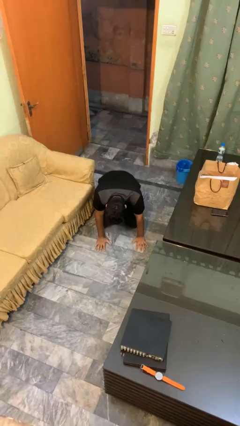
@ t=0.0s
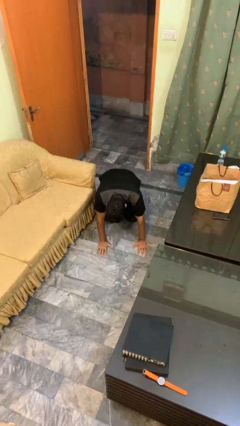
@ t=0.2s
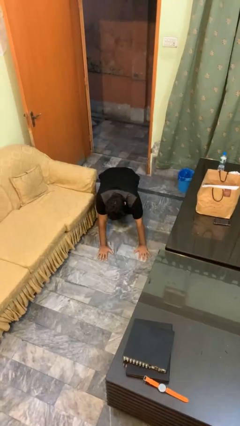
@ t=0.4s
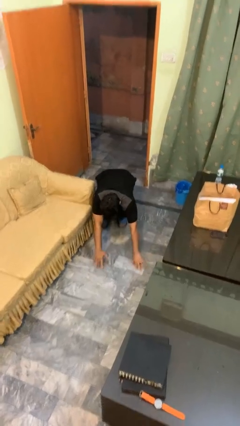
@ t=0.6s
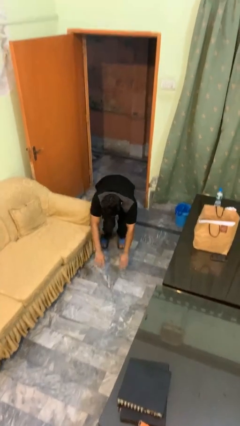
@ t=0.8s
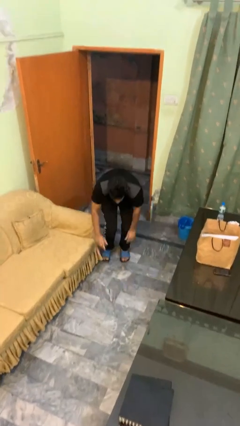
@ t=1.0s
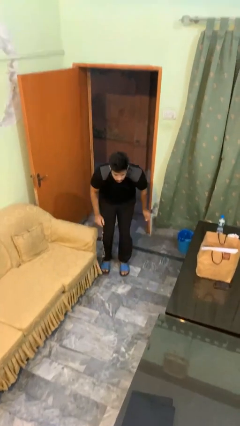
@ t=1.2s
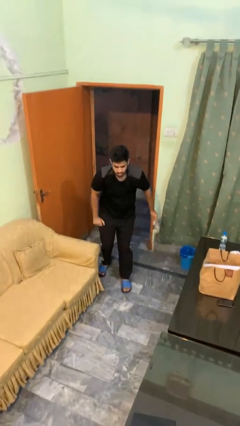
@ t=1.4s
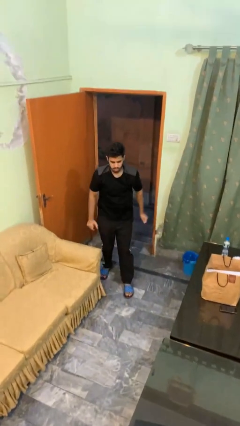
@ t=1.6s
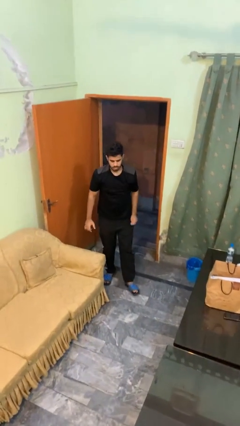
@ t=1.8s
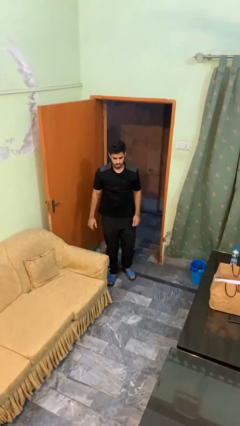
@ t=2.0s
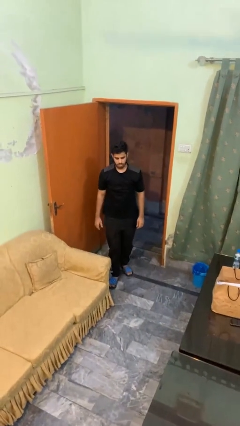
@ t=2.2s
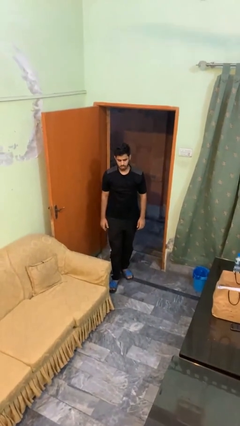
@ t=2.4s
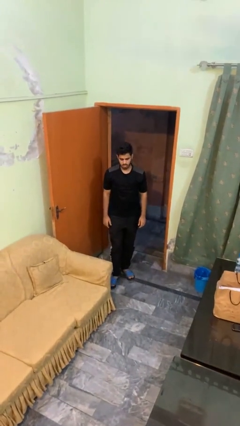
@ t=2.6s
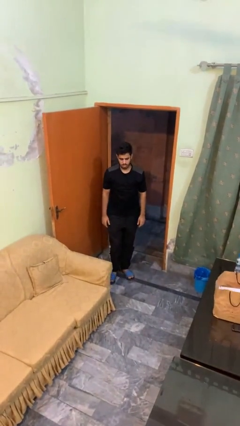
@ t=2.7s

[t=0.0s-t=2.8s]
person stands up from floor

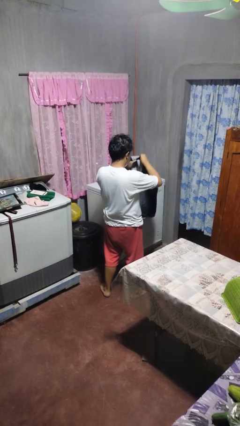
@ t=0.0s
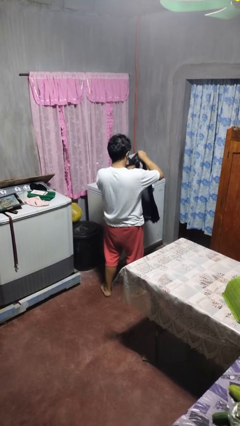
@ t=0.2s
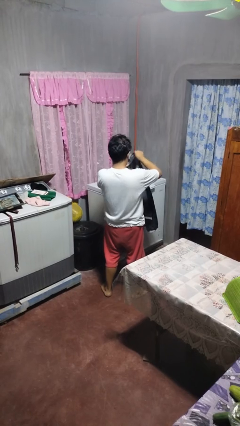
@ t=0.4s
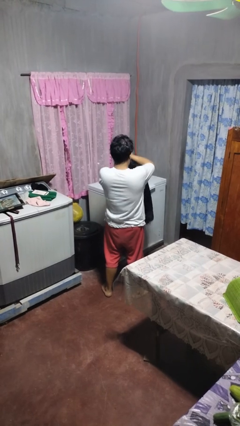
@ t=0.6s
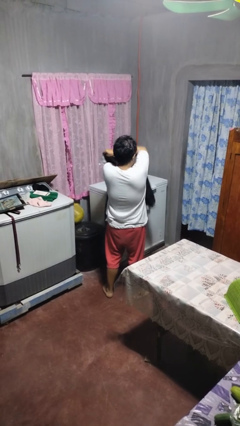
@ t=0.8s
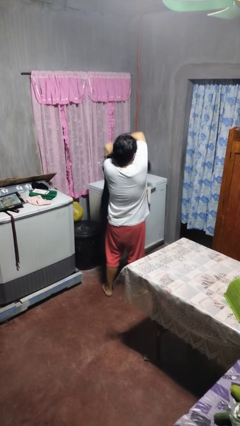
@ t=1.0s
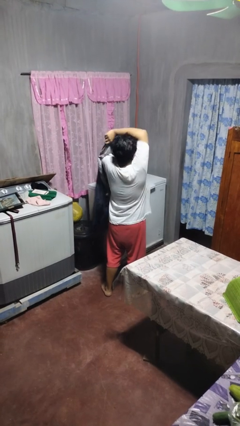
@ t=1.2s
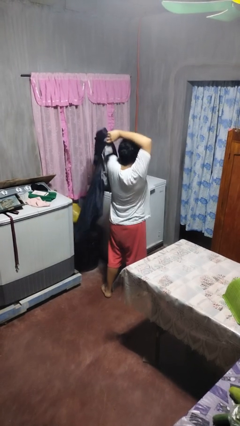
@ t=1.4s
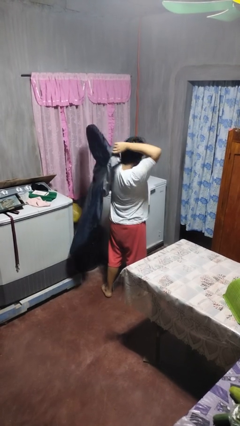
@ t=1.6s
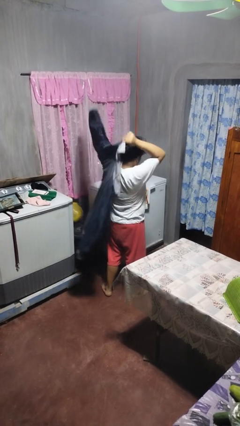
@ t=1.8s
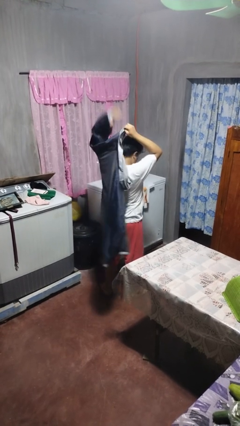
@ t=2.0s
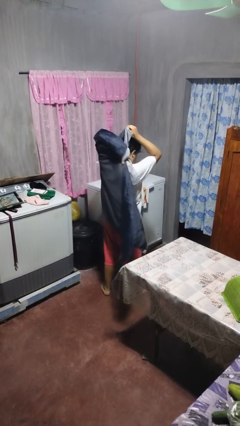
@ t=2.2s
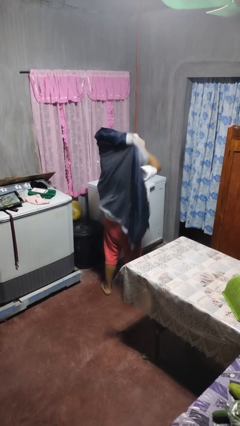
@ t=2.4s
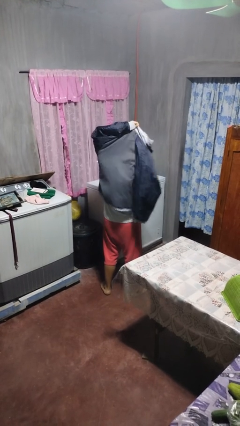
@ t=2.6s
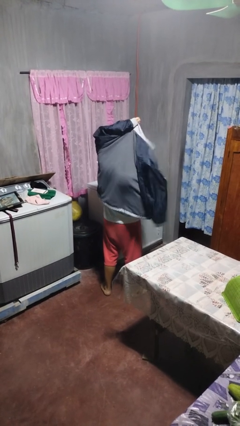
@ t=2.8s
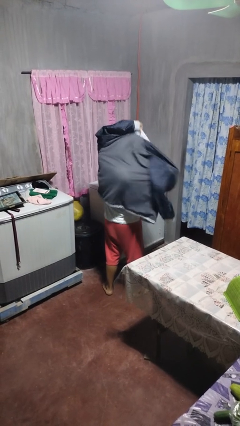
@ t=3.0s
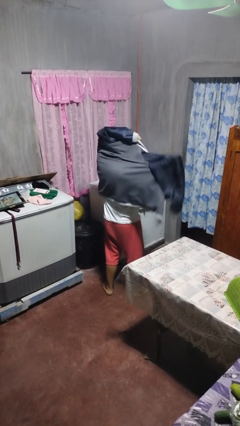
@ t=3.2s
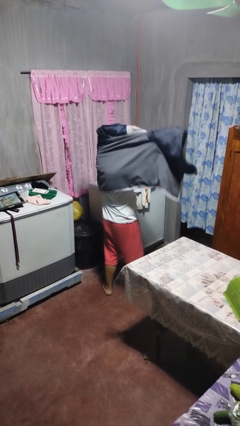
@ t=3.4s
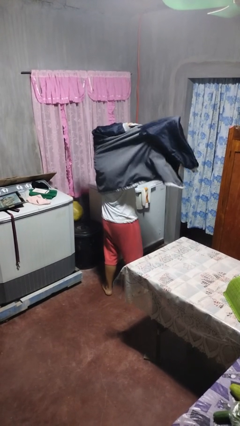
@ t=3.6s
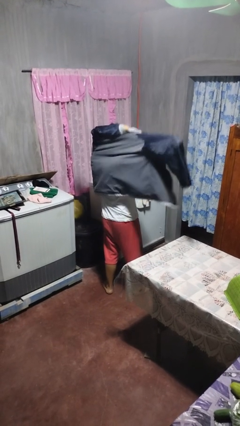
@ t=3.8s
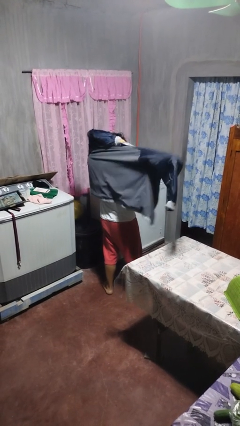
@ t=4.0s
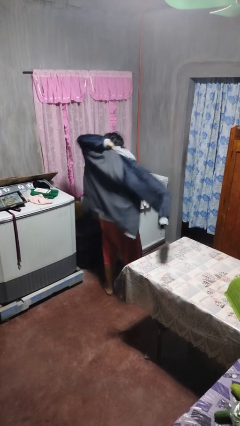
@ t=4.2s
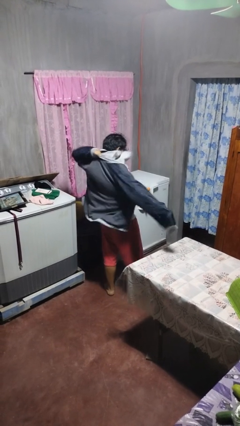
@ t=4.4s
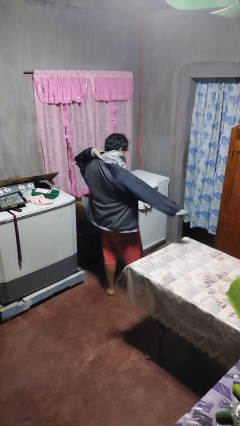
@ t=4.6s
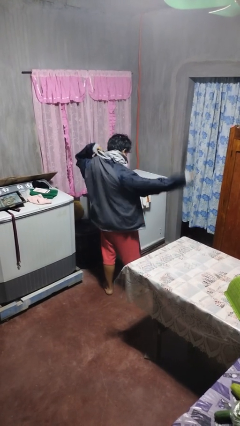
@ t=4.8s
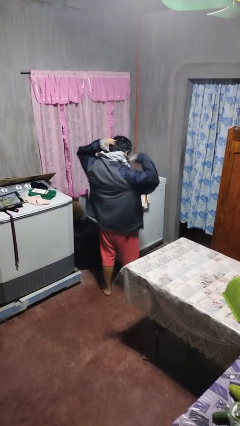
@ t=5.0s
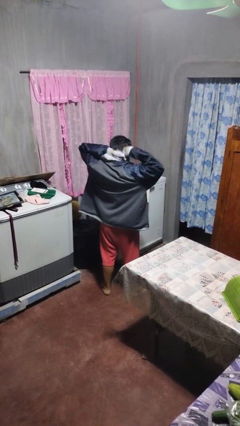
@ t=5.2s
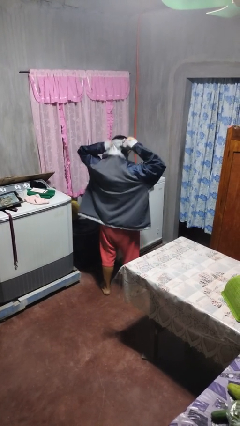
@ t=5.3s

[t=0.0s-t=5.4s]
person puts on hoodie

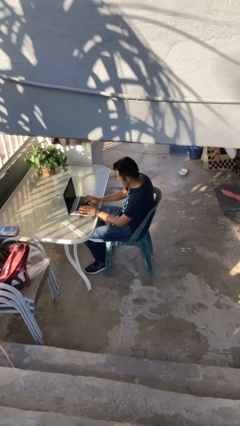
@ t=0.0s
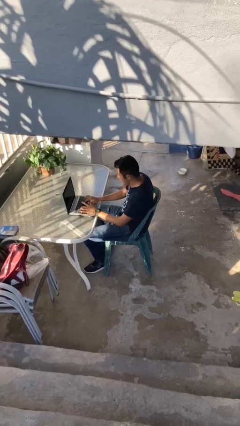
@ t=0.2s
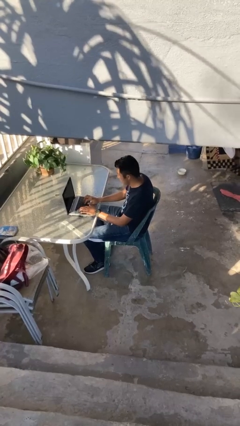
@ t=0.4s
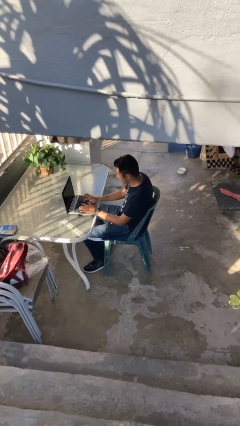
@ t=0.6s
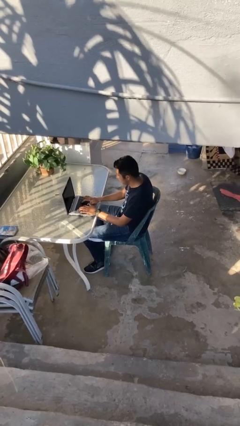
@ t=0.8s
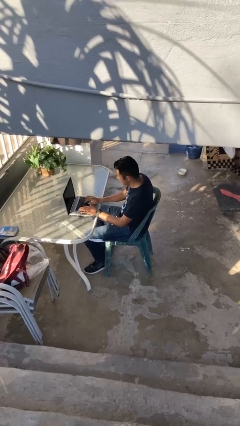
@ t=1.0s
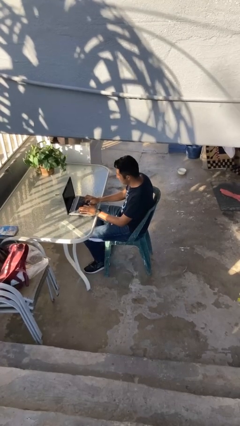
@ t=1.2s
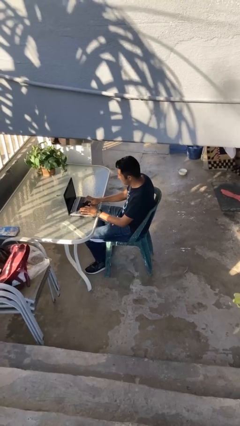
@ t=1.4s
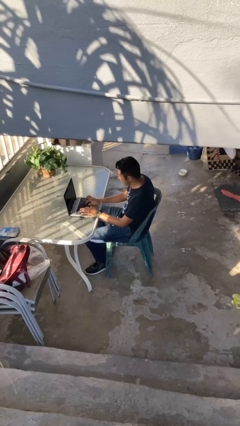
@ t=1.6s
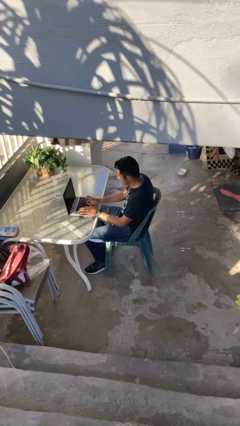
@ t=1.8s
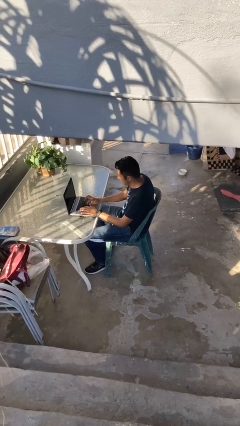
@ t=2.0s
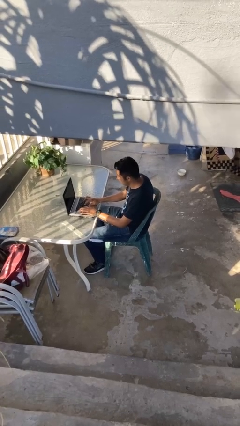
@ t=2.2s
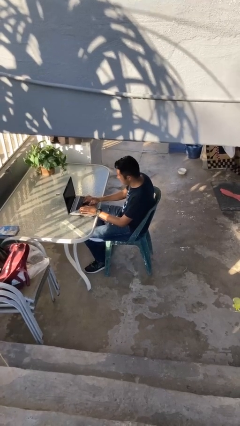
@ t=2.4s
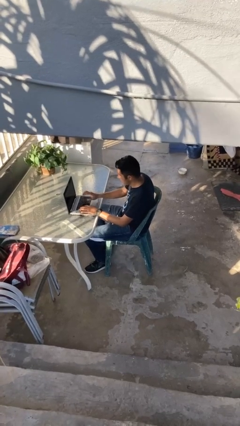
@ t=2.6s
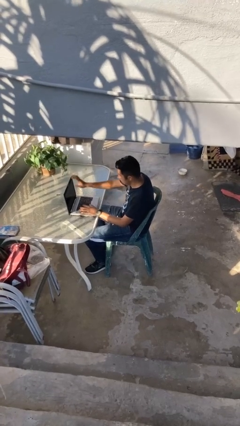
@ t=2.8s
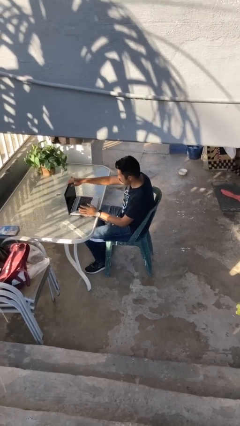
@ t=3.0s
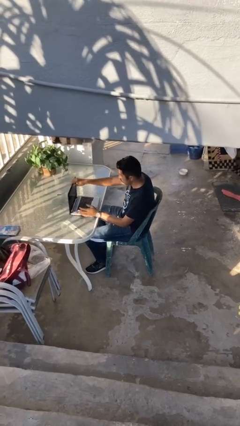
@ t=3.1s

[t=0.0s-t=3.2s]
person interacts with laptop

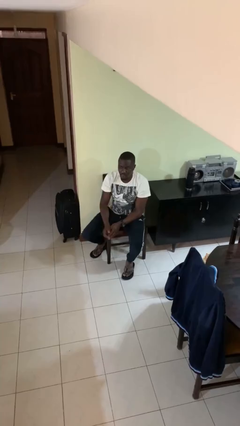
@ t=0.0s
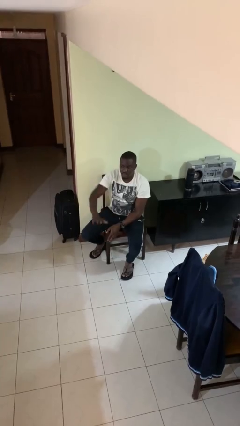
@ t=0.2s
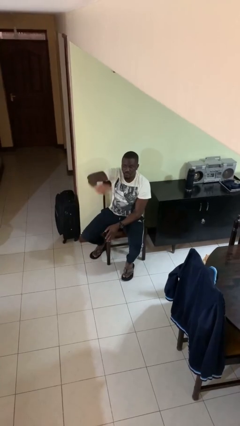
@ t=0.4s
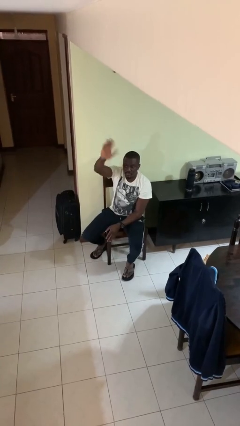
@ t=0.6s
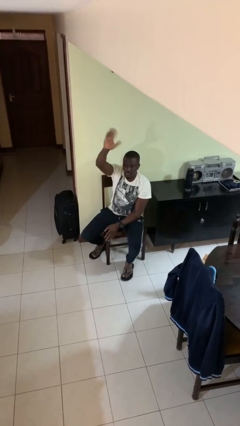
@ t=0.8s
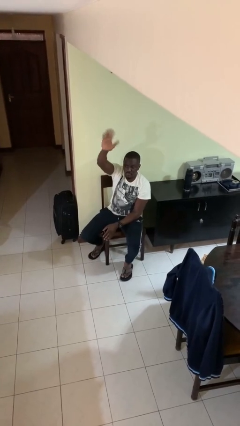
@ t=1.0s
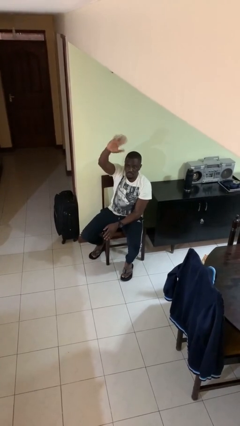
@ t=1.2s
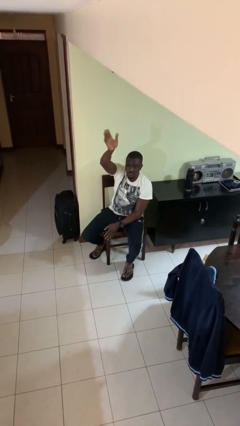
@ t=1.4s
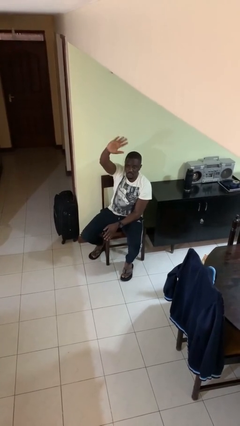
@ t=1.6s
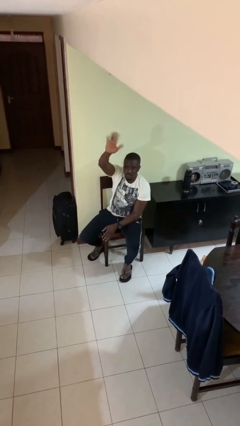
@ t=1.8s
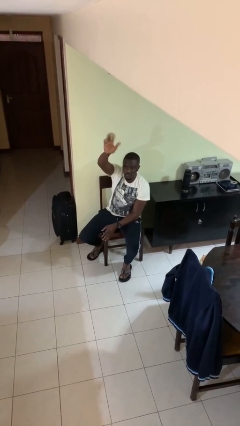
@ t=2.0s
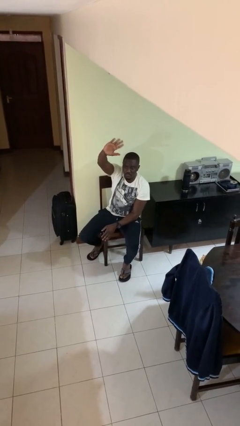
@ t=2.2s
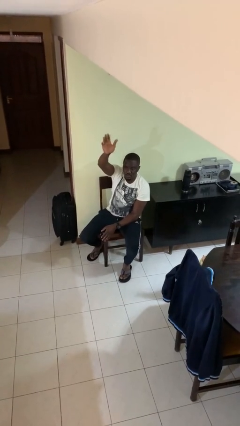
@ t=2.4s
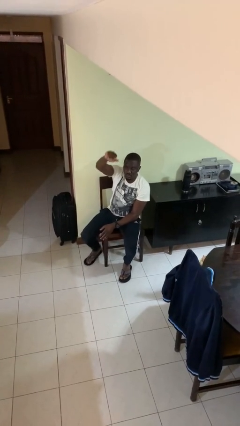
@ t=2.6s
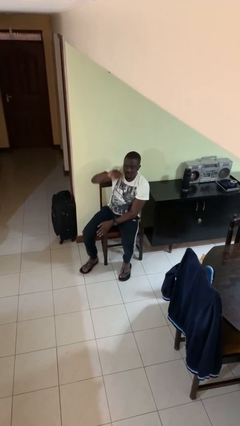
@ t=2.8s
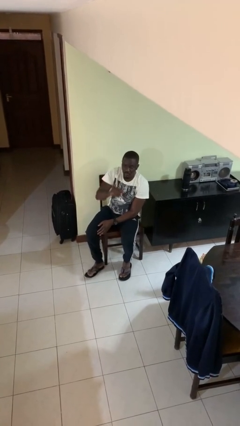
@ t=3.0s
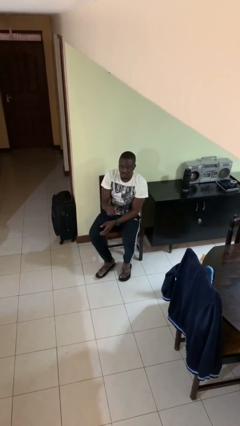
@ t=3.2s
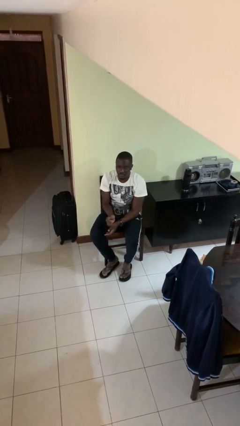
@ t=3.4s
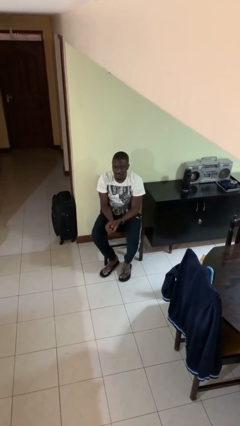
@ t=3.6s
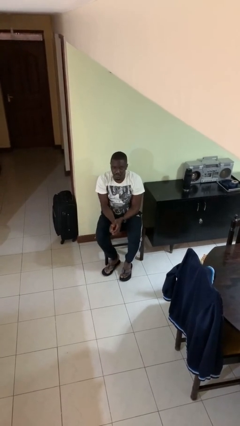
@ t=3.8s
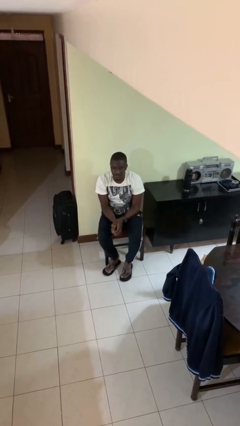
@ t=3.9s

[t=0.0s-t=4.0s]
person waves at person

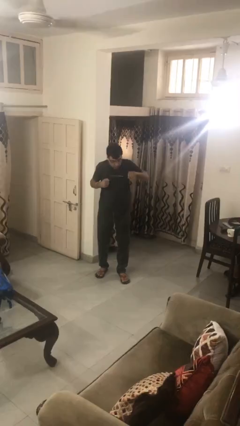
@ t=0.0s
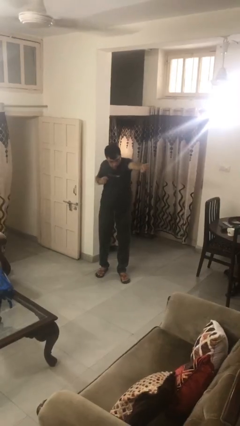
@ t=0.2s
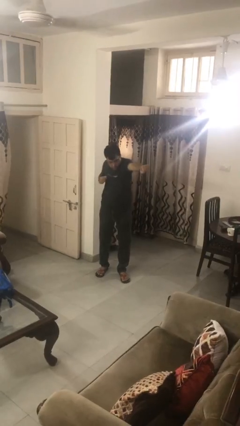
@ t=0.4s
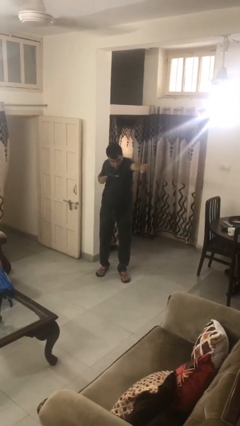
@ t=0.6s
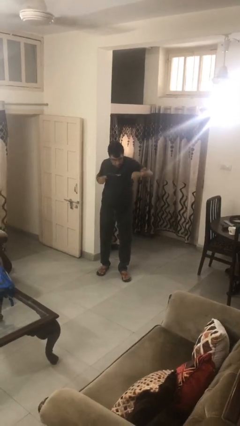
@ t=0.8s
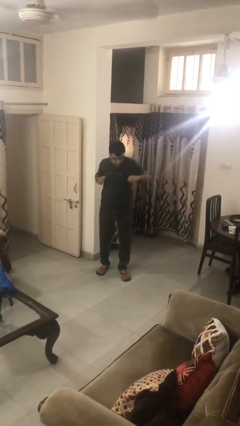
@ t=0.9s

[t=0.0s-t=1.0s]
person punches

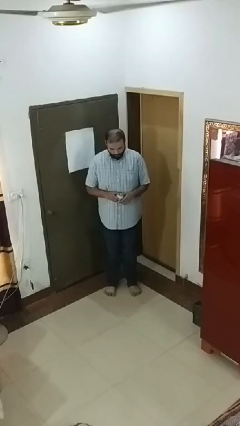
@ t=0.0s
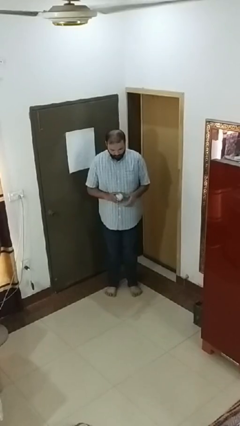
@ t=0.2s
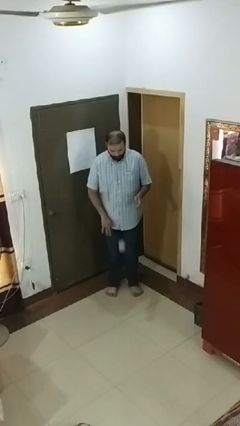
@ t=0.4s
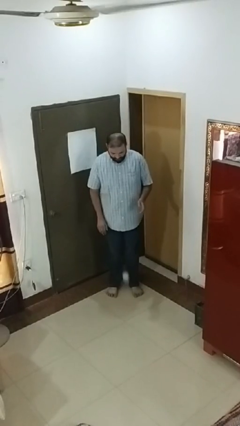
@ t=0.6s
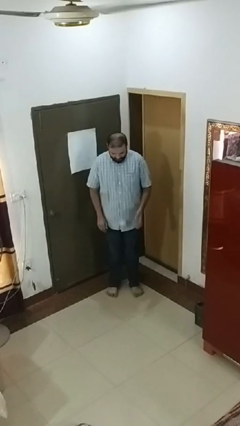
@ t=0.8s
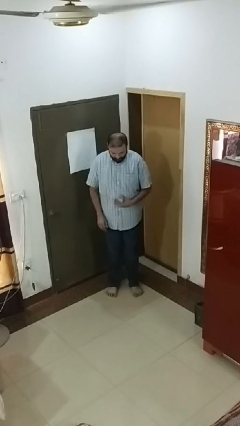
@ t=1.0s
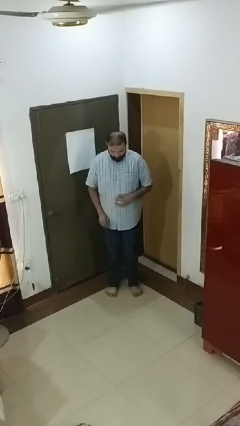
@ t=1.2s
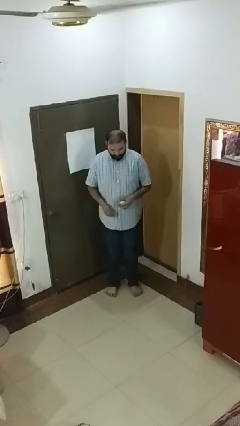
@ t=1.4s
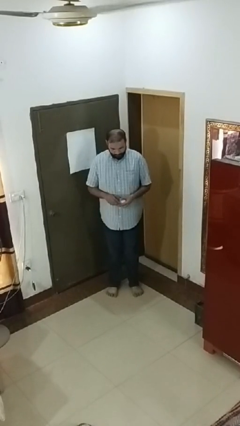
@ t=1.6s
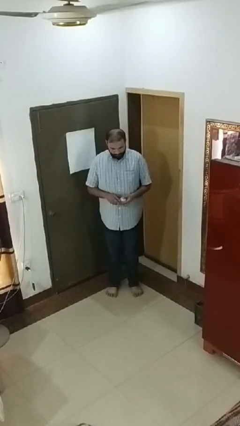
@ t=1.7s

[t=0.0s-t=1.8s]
person bounces ball on floor
